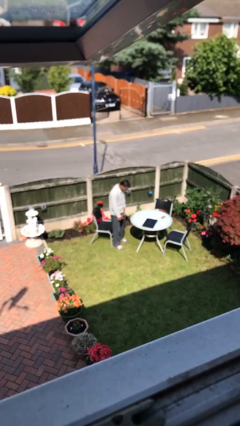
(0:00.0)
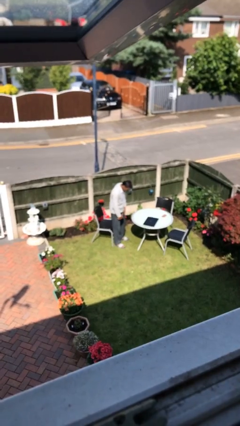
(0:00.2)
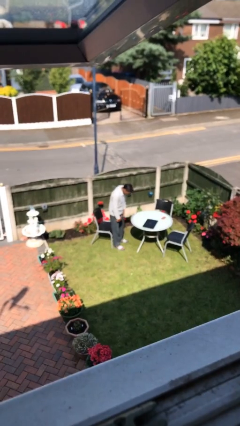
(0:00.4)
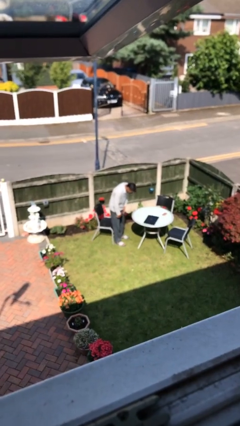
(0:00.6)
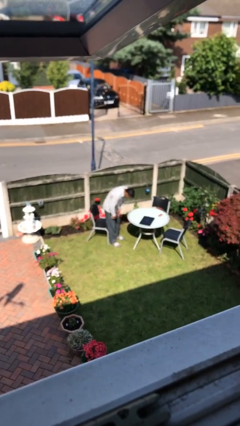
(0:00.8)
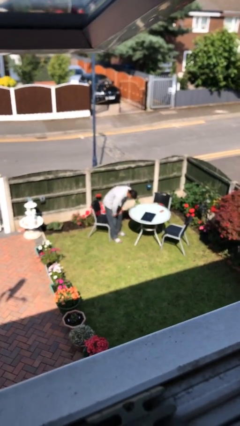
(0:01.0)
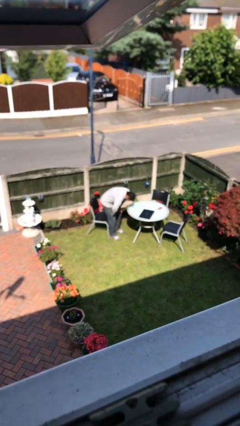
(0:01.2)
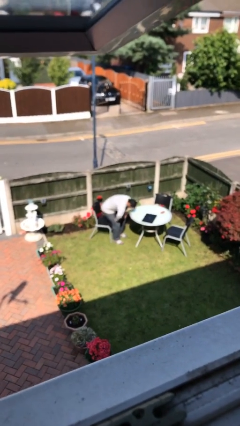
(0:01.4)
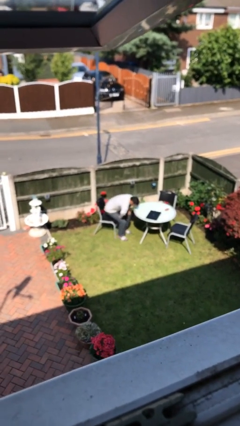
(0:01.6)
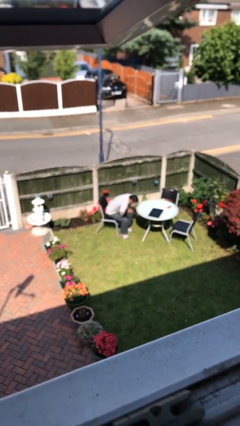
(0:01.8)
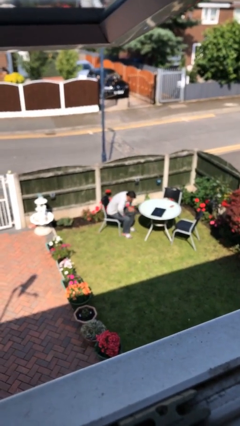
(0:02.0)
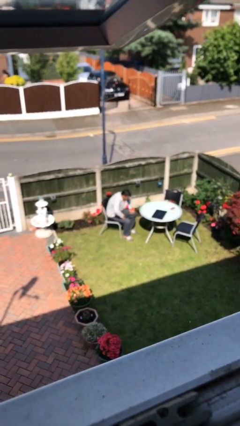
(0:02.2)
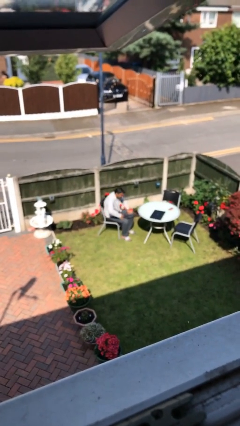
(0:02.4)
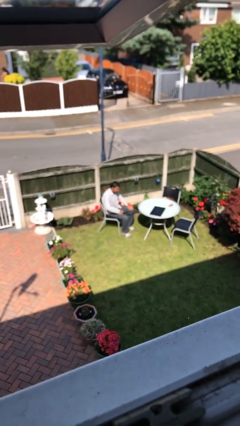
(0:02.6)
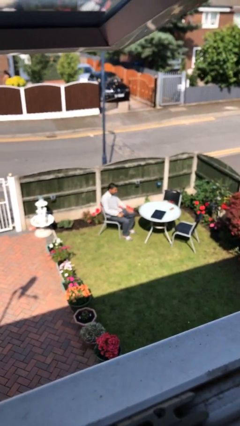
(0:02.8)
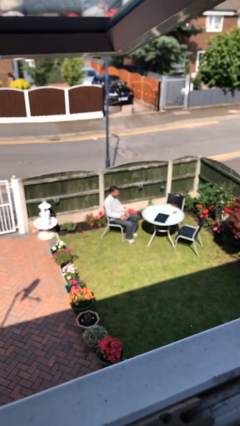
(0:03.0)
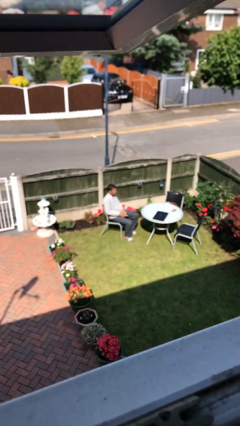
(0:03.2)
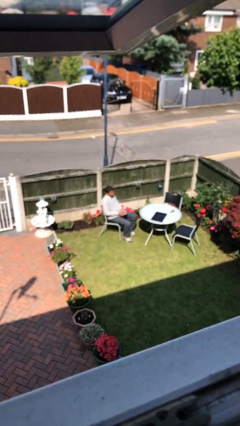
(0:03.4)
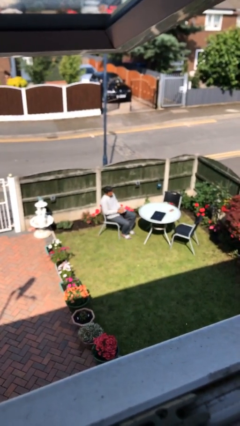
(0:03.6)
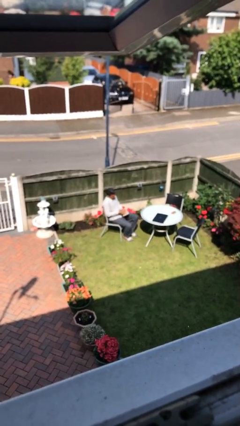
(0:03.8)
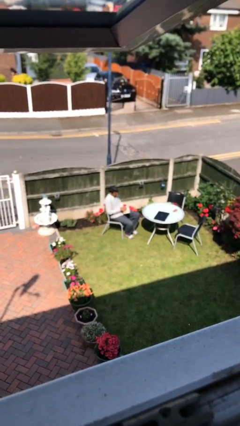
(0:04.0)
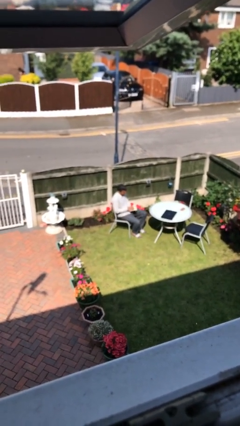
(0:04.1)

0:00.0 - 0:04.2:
person sits down

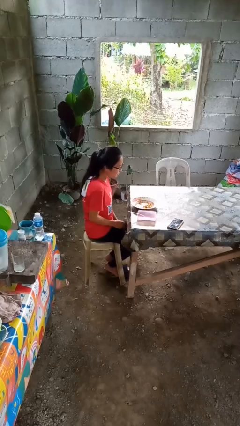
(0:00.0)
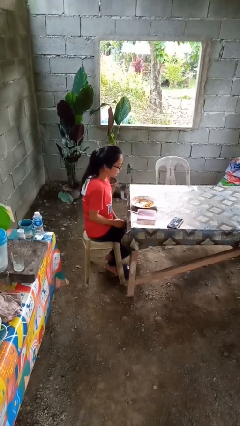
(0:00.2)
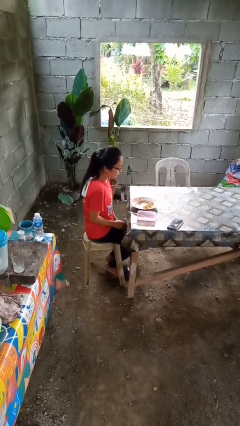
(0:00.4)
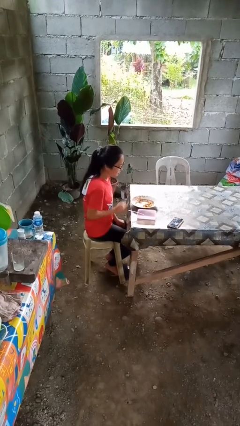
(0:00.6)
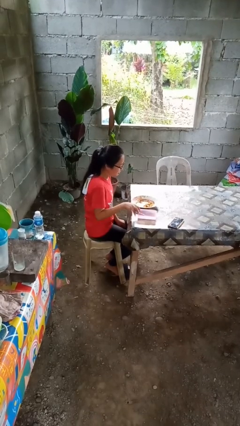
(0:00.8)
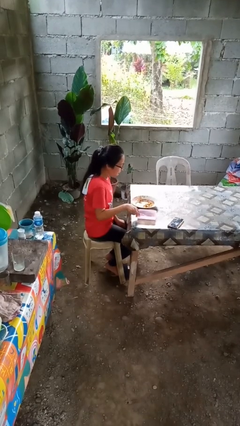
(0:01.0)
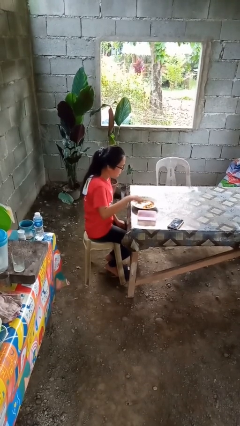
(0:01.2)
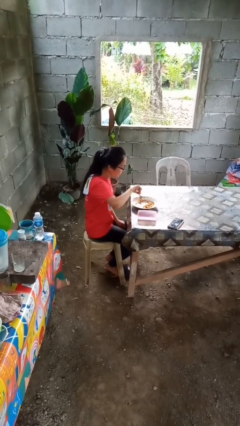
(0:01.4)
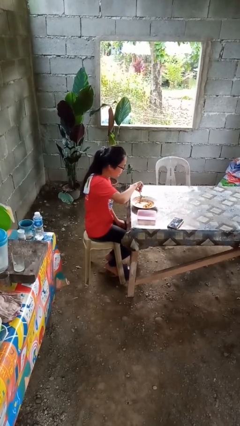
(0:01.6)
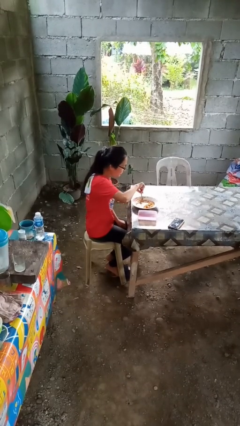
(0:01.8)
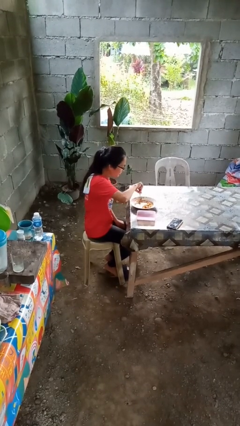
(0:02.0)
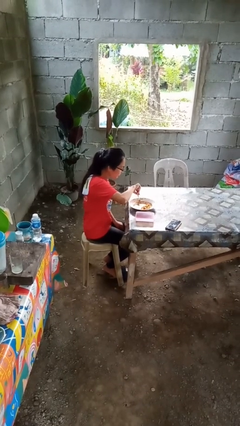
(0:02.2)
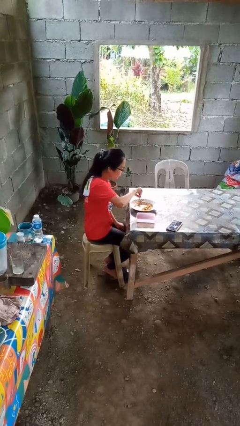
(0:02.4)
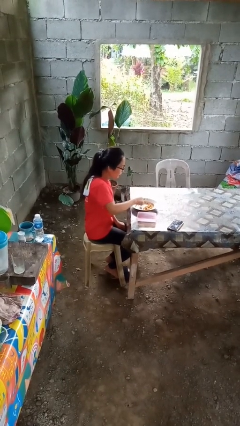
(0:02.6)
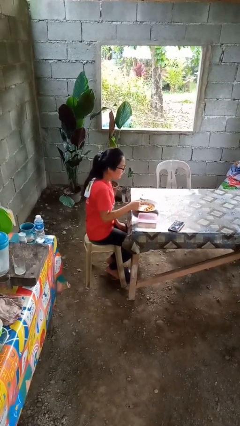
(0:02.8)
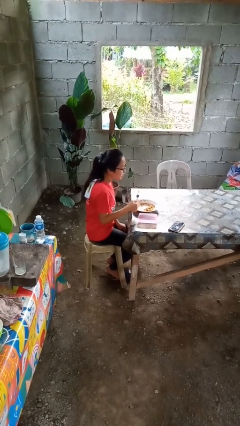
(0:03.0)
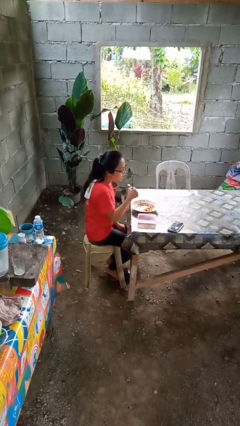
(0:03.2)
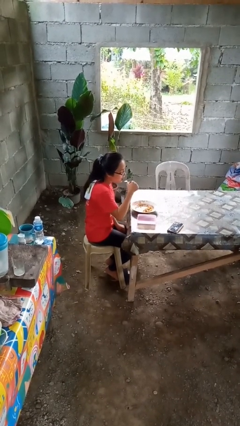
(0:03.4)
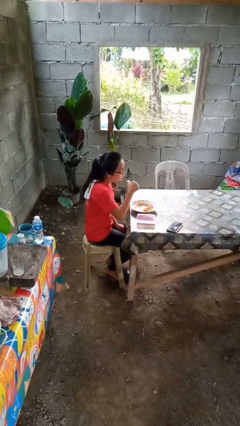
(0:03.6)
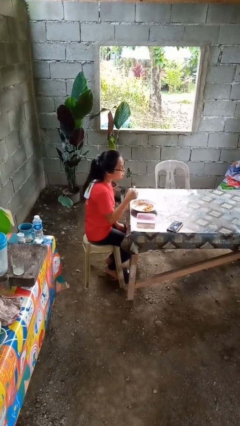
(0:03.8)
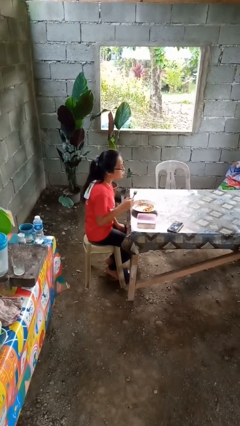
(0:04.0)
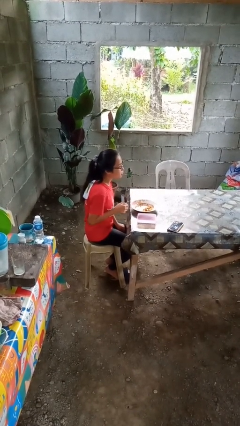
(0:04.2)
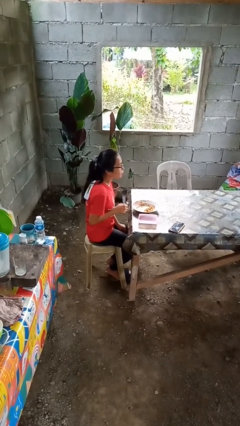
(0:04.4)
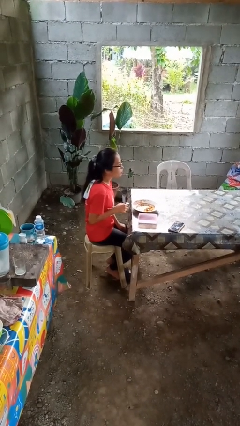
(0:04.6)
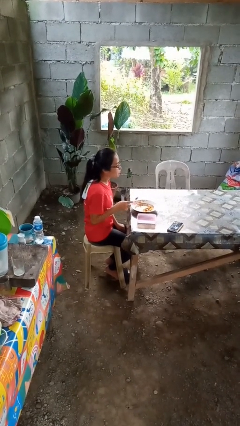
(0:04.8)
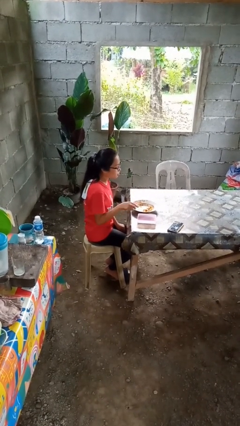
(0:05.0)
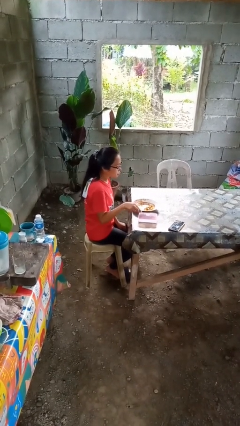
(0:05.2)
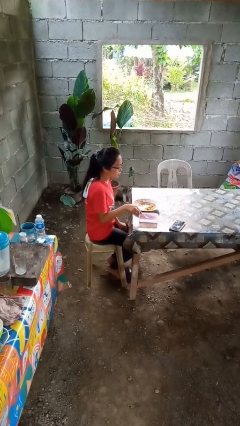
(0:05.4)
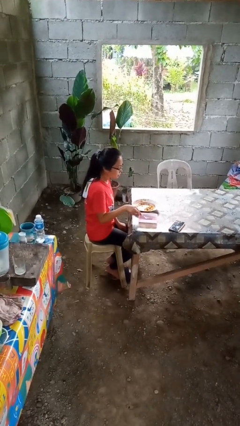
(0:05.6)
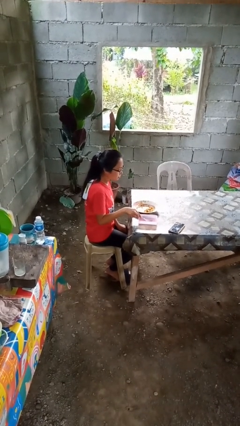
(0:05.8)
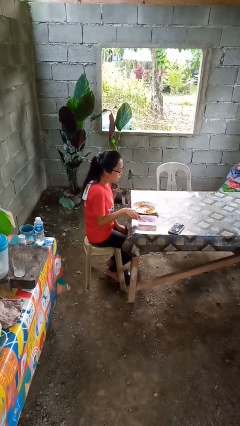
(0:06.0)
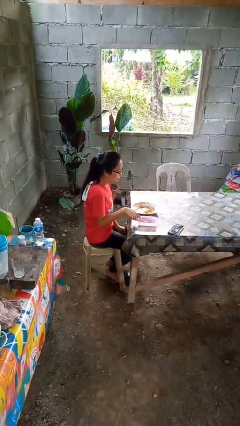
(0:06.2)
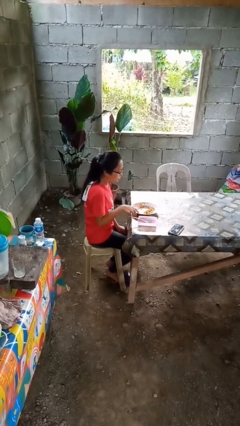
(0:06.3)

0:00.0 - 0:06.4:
person eats with utensil

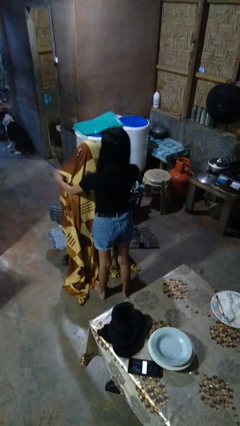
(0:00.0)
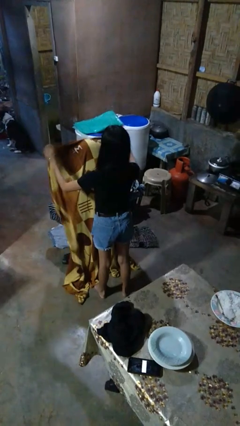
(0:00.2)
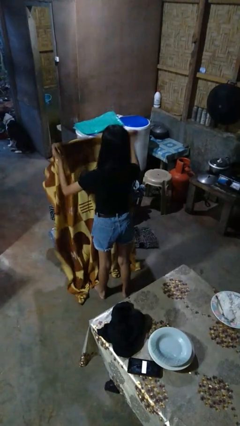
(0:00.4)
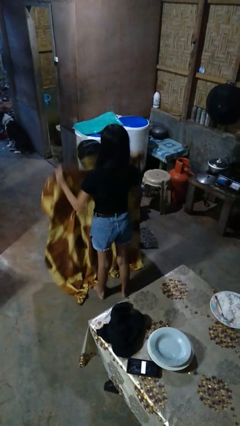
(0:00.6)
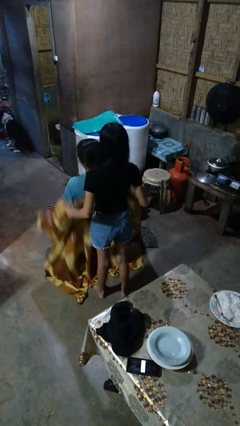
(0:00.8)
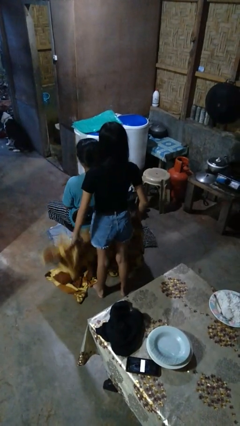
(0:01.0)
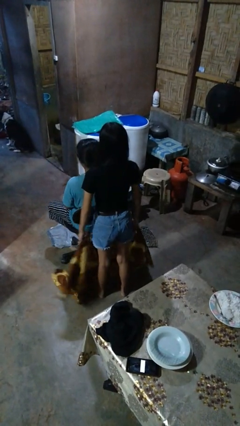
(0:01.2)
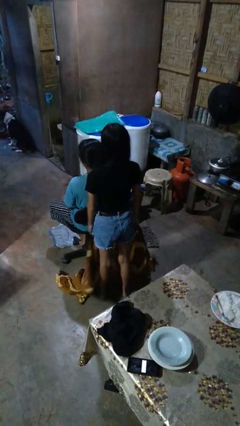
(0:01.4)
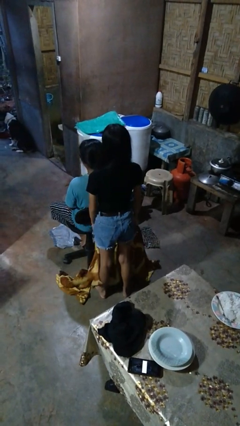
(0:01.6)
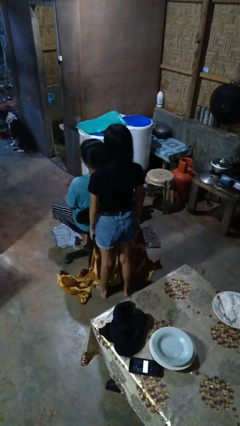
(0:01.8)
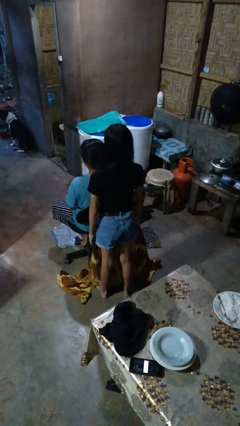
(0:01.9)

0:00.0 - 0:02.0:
person uncovers friend with blanket

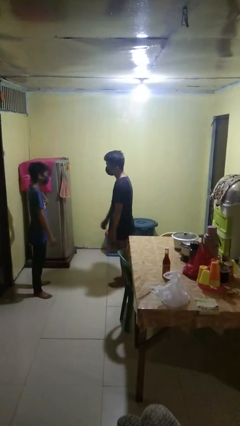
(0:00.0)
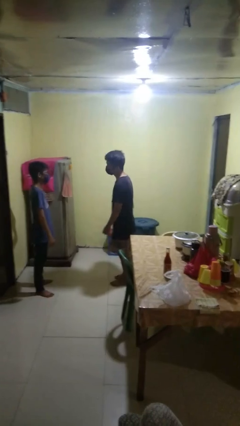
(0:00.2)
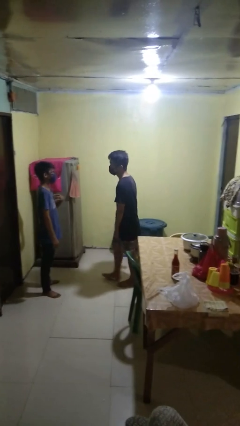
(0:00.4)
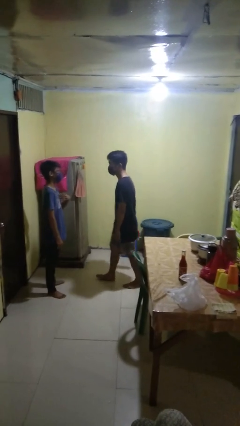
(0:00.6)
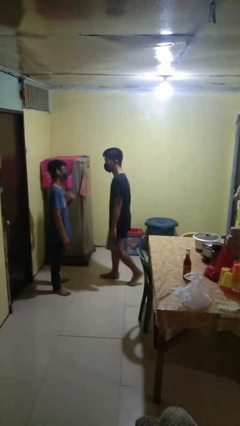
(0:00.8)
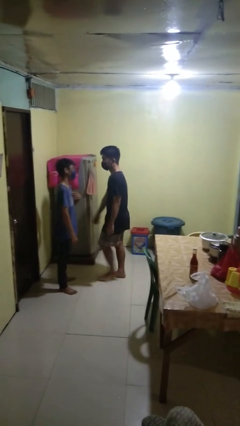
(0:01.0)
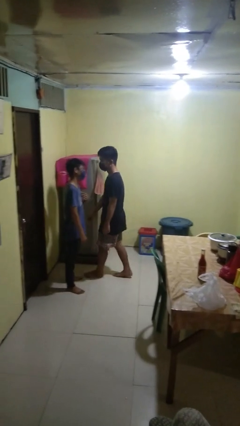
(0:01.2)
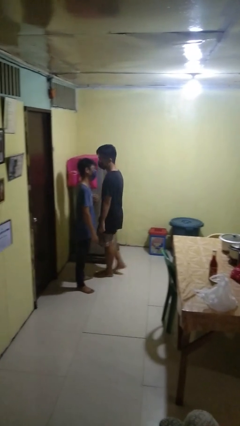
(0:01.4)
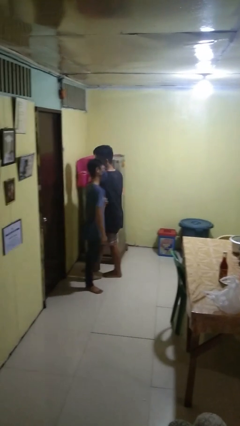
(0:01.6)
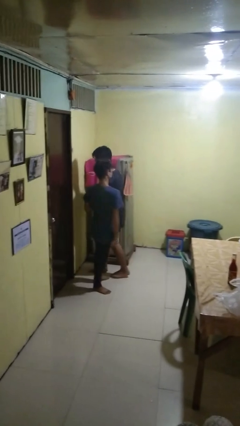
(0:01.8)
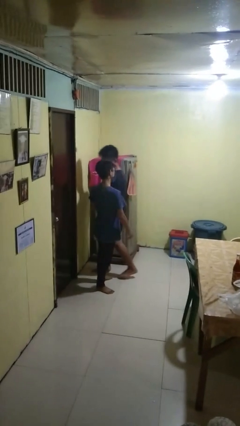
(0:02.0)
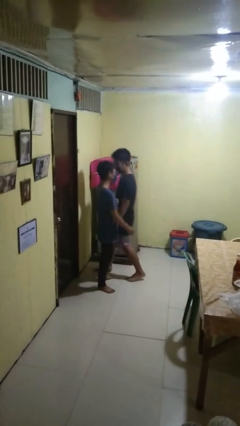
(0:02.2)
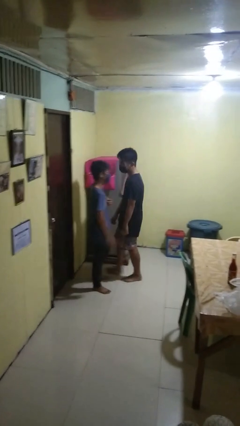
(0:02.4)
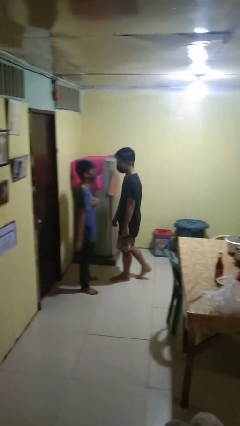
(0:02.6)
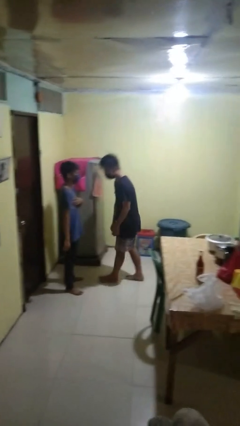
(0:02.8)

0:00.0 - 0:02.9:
person bumps into person

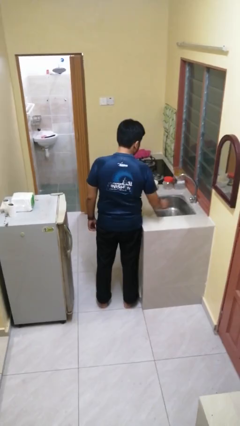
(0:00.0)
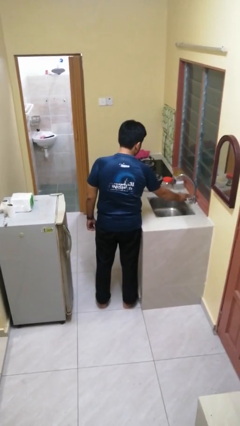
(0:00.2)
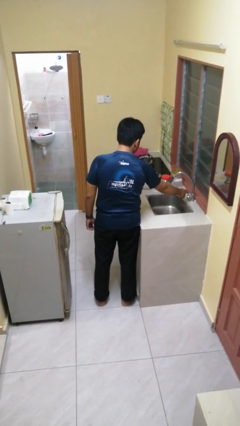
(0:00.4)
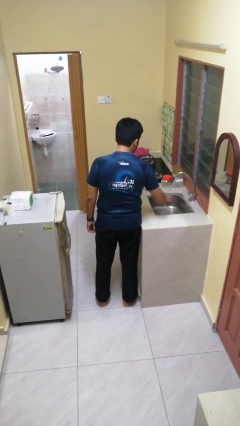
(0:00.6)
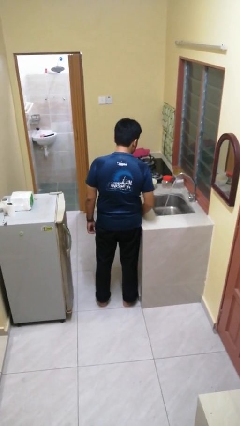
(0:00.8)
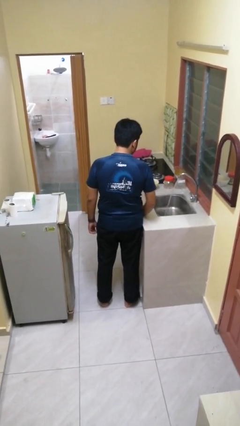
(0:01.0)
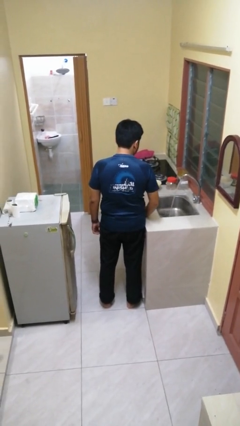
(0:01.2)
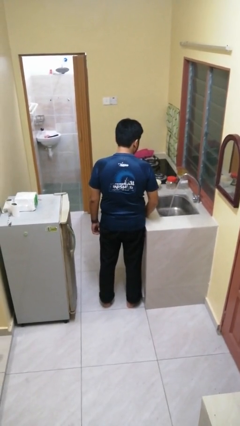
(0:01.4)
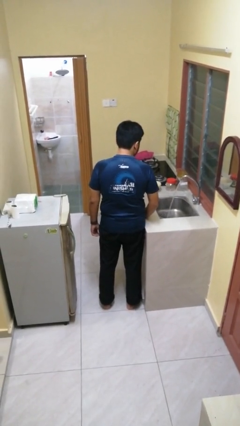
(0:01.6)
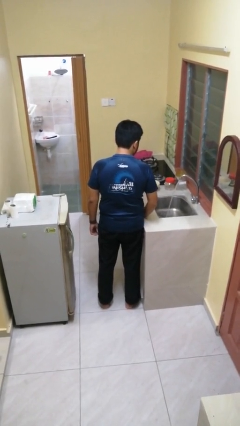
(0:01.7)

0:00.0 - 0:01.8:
person turns on faucet

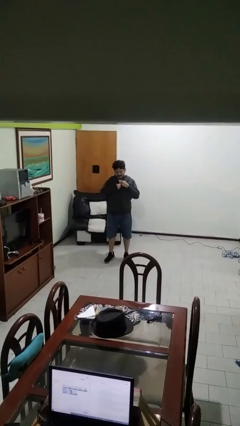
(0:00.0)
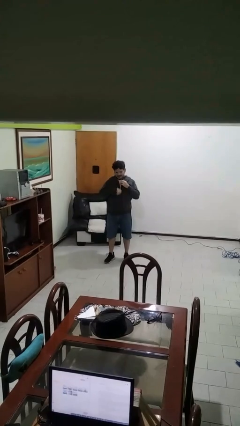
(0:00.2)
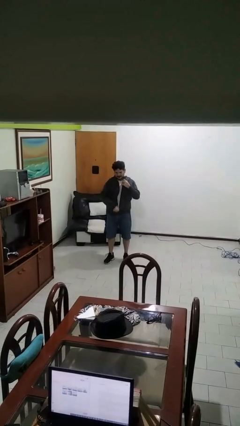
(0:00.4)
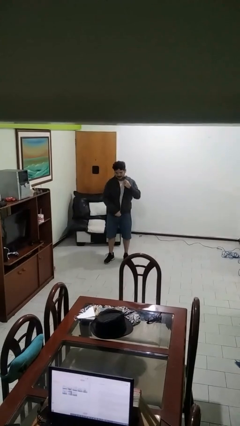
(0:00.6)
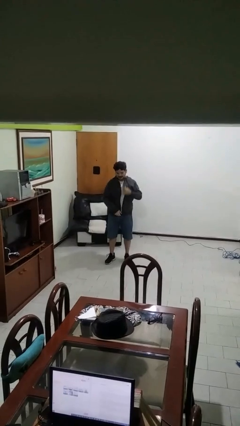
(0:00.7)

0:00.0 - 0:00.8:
person unzips jacket
